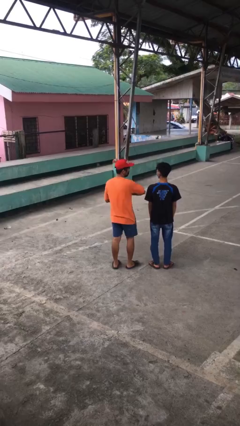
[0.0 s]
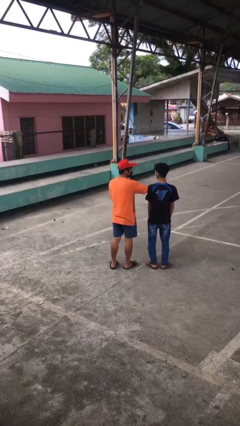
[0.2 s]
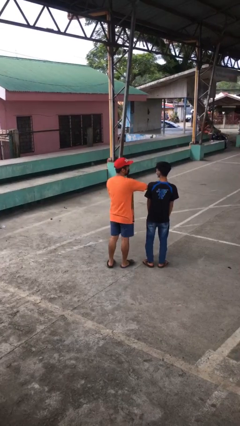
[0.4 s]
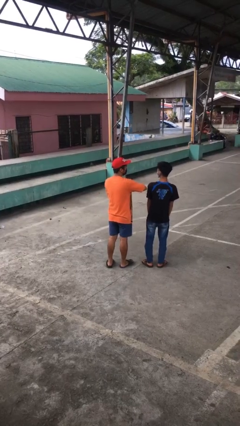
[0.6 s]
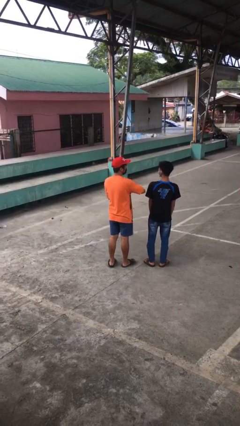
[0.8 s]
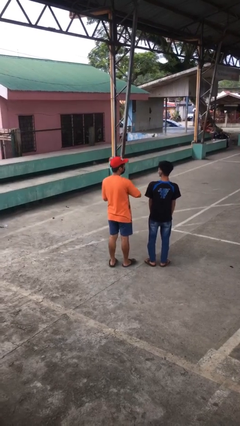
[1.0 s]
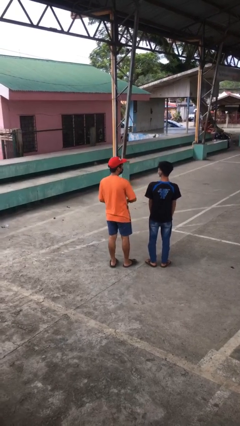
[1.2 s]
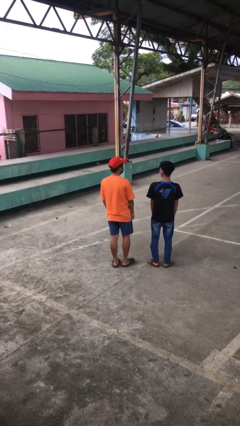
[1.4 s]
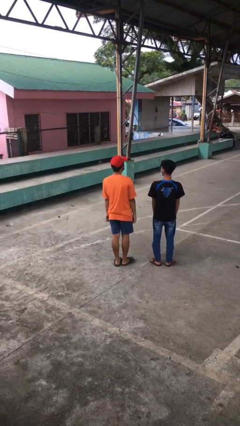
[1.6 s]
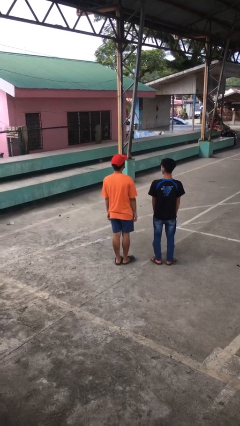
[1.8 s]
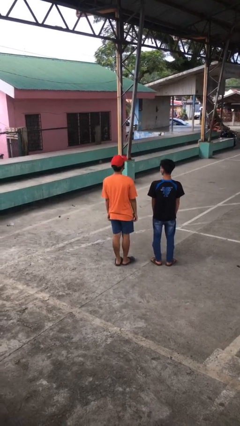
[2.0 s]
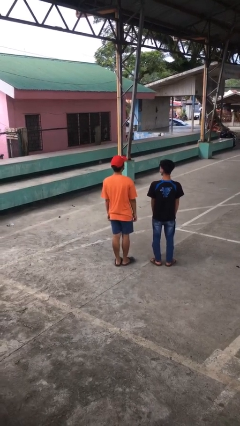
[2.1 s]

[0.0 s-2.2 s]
person nudges person with elbow
